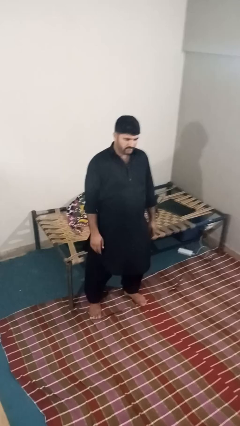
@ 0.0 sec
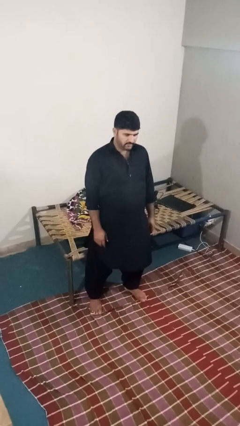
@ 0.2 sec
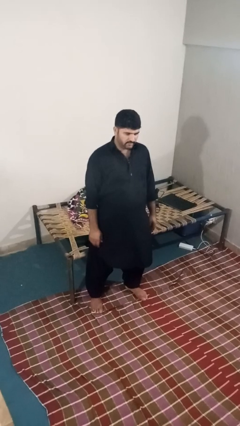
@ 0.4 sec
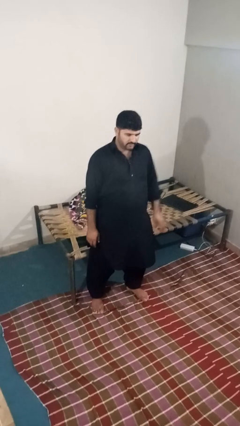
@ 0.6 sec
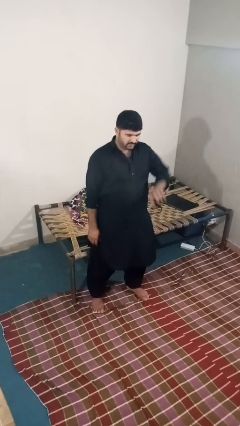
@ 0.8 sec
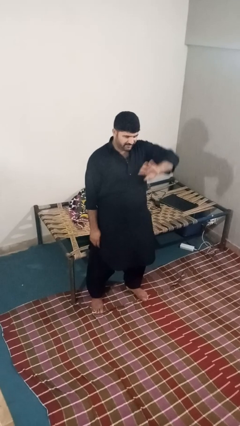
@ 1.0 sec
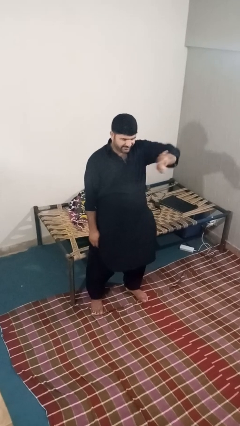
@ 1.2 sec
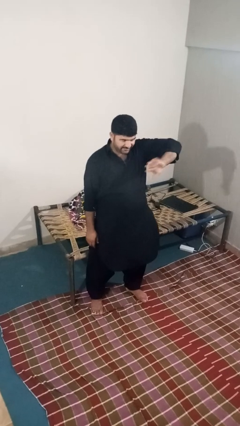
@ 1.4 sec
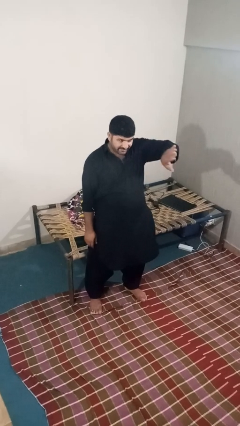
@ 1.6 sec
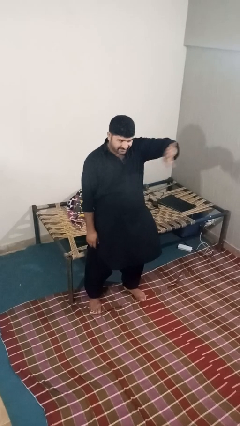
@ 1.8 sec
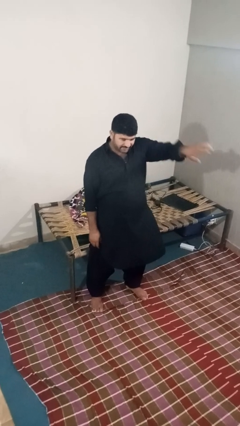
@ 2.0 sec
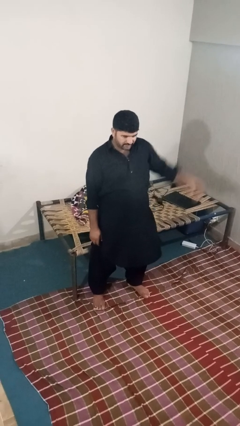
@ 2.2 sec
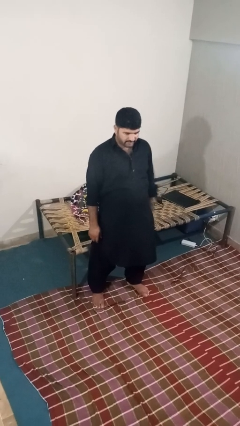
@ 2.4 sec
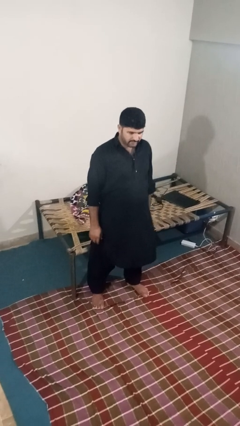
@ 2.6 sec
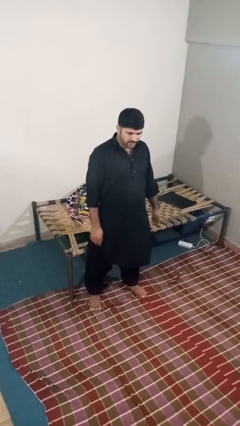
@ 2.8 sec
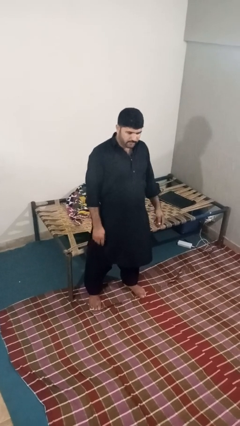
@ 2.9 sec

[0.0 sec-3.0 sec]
person gestures swipe left

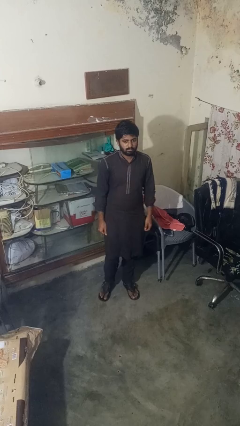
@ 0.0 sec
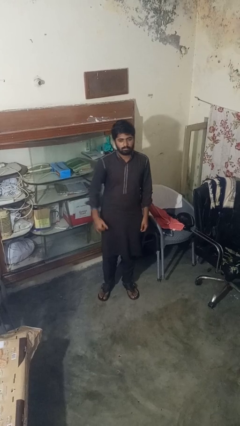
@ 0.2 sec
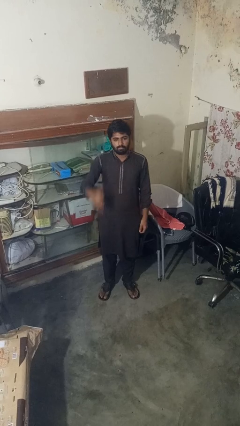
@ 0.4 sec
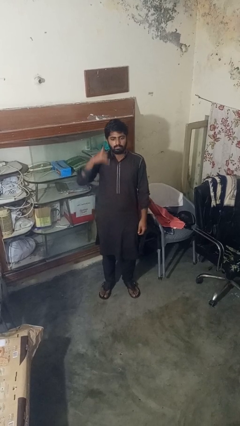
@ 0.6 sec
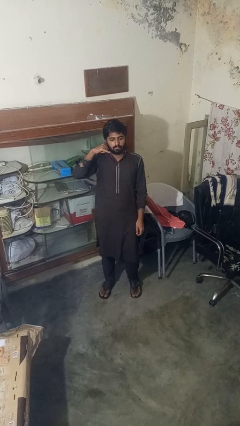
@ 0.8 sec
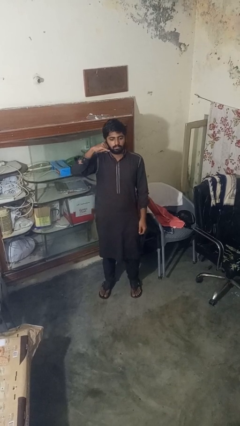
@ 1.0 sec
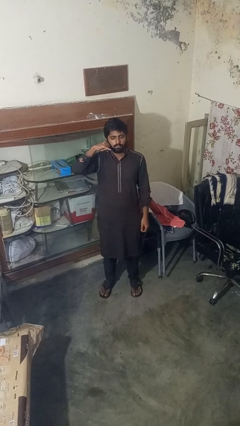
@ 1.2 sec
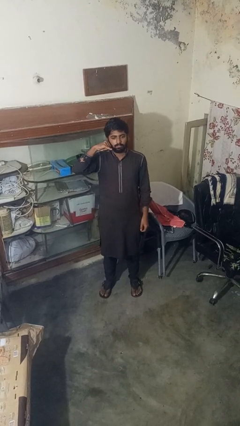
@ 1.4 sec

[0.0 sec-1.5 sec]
person gestures call me

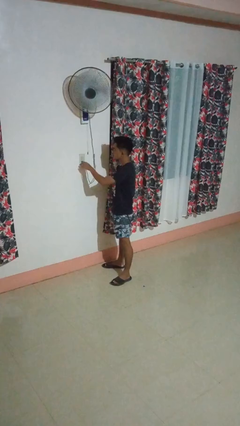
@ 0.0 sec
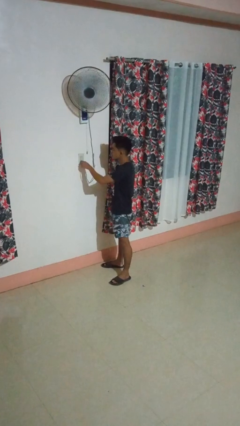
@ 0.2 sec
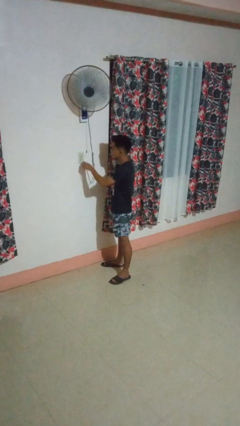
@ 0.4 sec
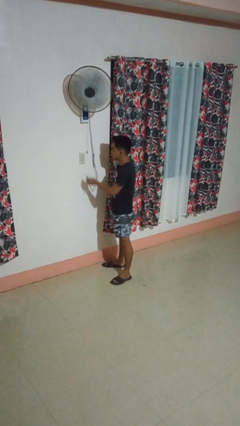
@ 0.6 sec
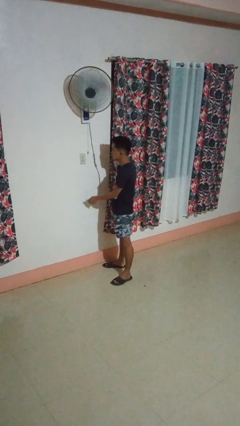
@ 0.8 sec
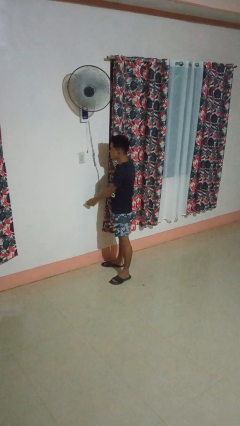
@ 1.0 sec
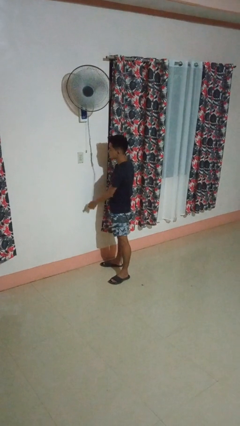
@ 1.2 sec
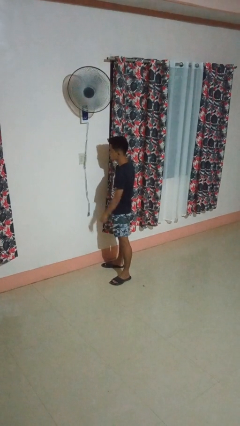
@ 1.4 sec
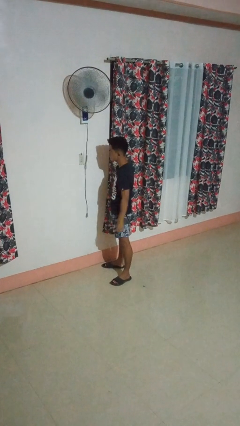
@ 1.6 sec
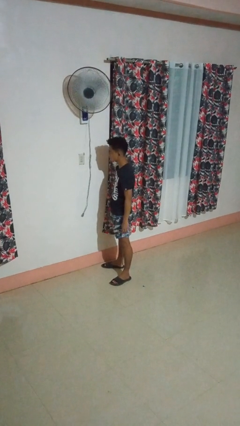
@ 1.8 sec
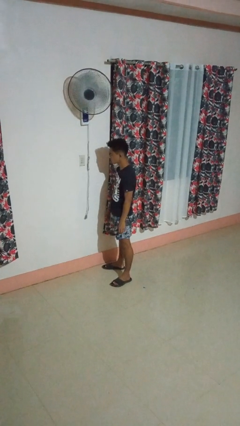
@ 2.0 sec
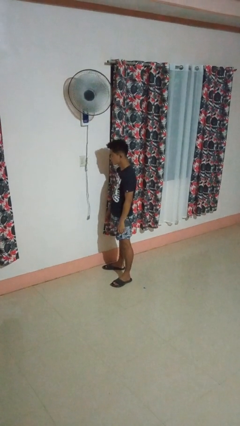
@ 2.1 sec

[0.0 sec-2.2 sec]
person unplugs from electrical socket

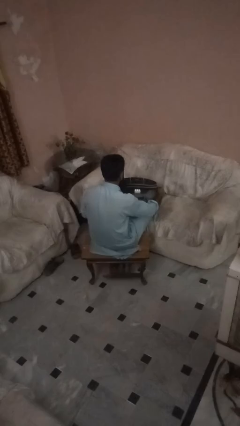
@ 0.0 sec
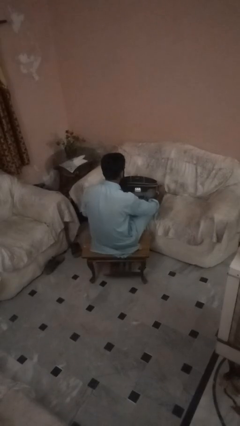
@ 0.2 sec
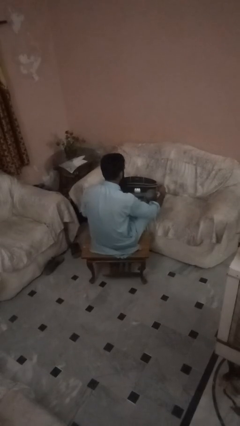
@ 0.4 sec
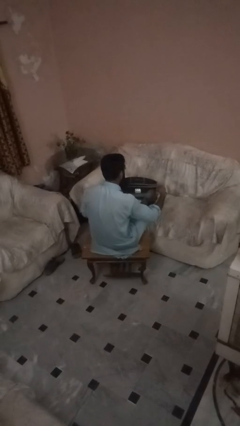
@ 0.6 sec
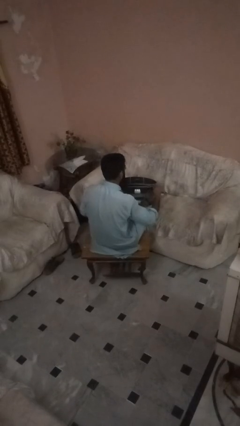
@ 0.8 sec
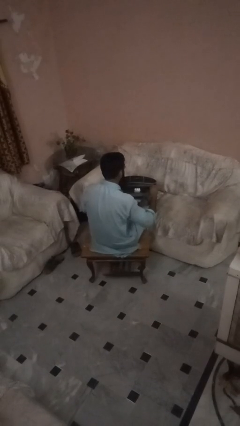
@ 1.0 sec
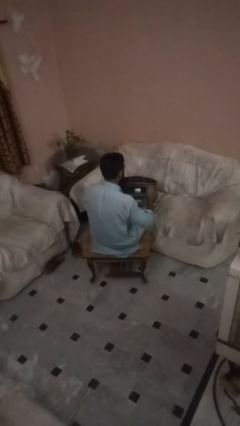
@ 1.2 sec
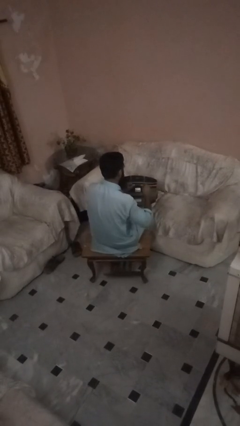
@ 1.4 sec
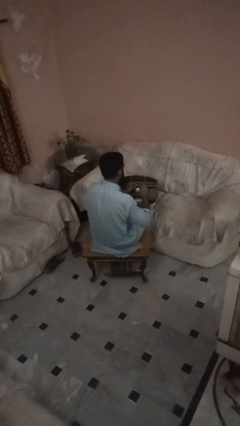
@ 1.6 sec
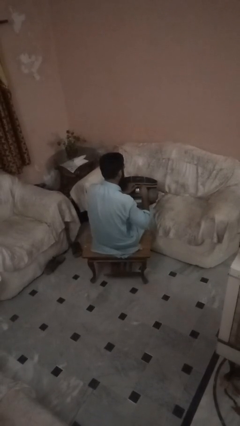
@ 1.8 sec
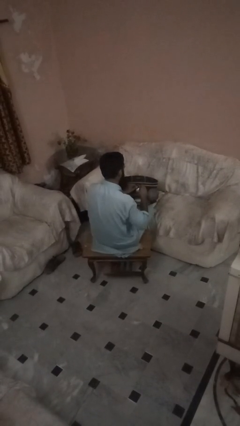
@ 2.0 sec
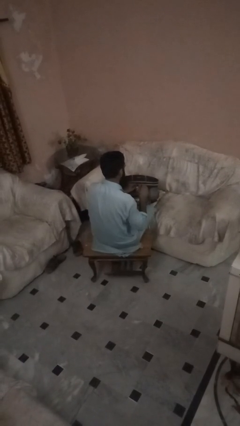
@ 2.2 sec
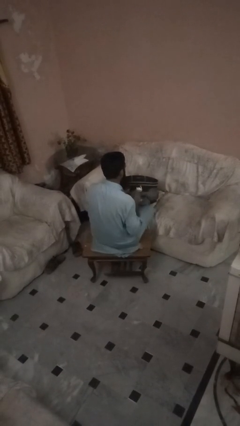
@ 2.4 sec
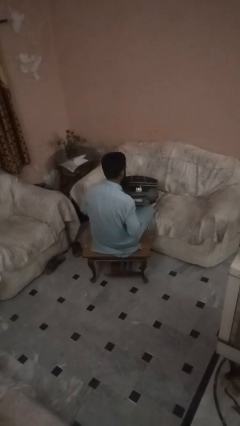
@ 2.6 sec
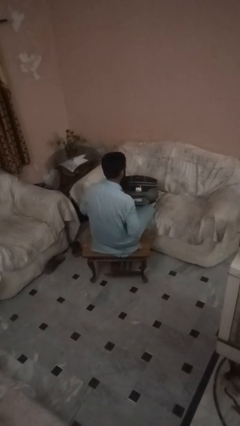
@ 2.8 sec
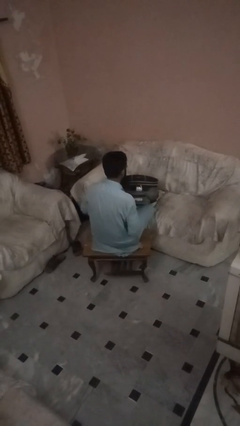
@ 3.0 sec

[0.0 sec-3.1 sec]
person closes suitcase

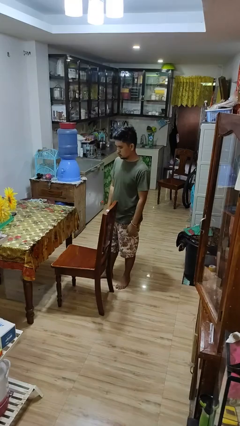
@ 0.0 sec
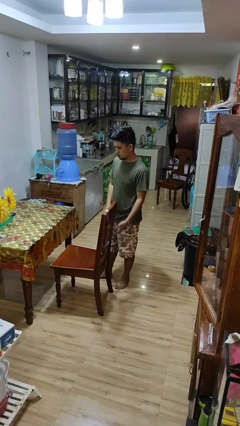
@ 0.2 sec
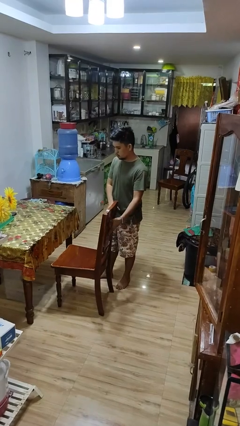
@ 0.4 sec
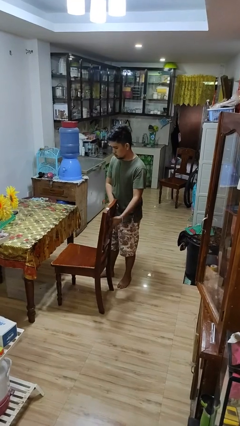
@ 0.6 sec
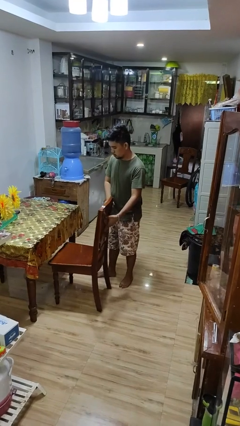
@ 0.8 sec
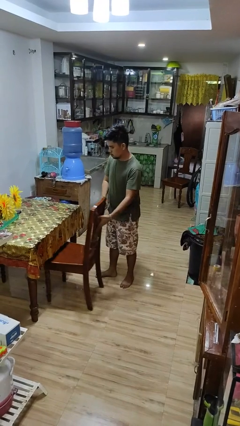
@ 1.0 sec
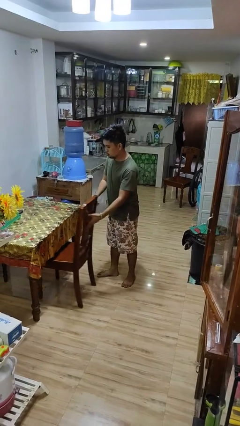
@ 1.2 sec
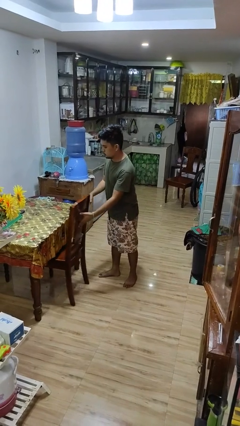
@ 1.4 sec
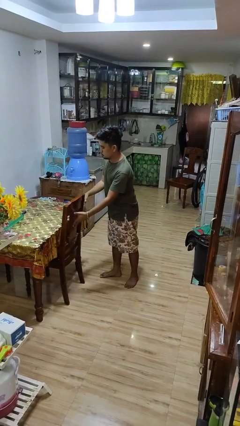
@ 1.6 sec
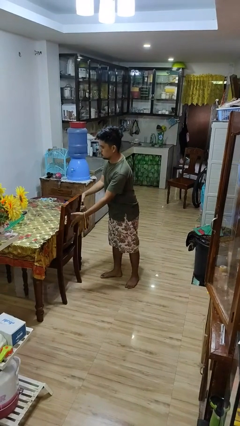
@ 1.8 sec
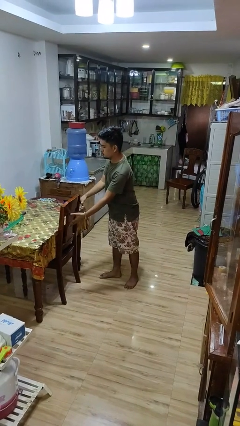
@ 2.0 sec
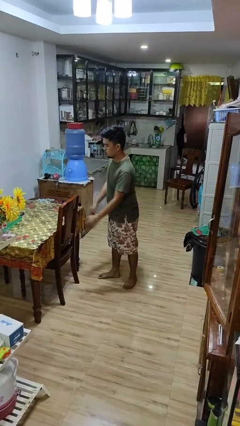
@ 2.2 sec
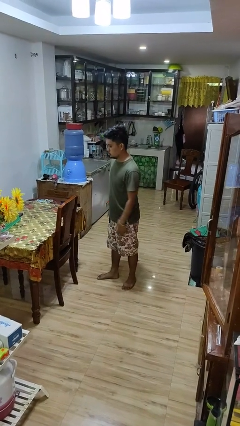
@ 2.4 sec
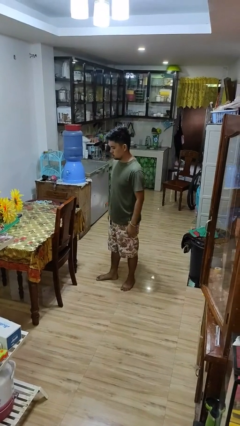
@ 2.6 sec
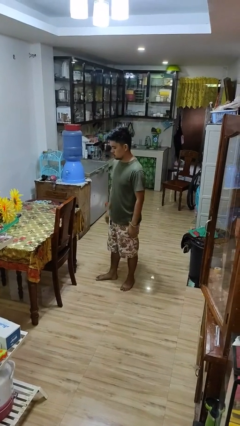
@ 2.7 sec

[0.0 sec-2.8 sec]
person pushes in chair

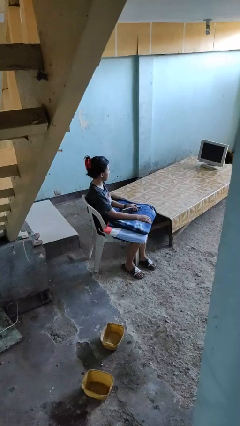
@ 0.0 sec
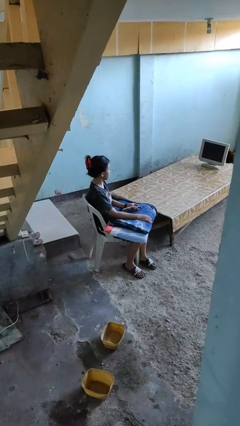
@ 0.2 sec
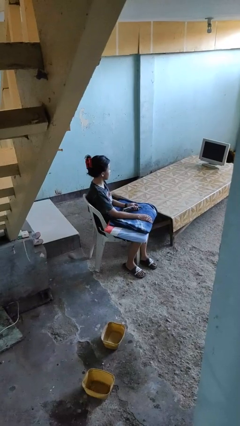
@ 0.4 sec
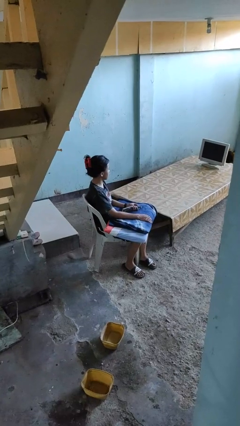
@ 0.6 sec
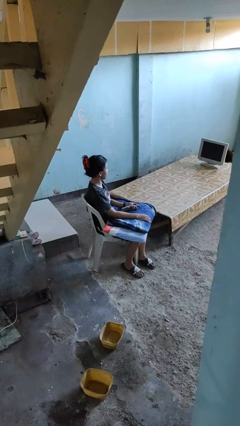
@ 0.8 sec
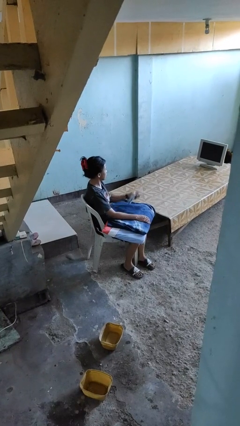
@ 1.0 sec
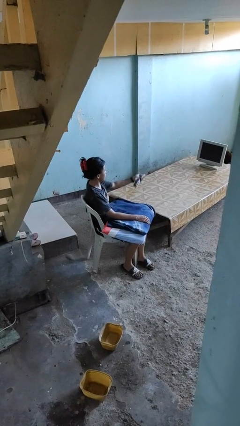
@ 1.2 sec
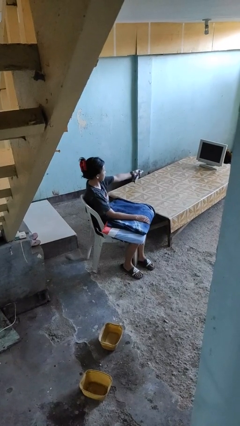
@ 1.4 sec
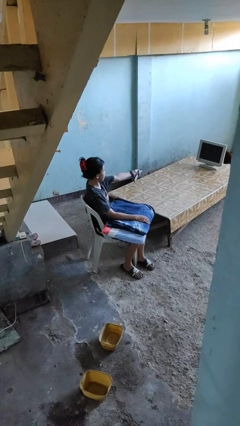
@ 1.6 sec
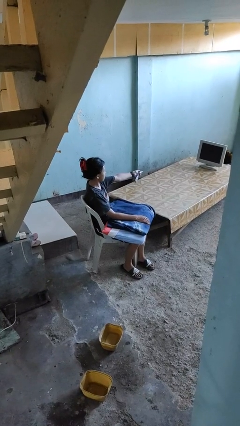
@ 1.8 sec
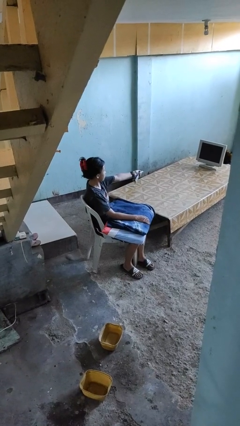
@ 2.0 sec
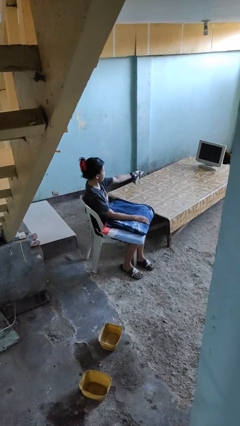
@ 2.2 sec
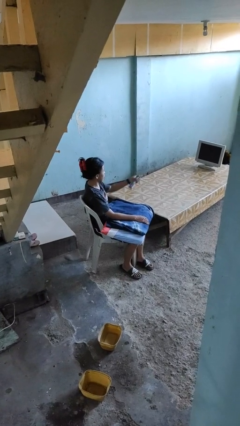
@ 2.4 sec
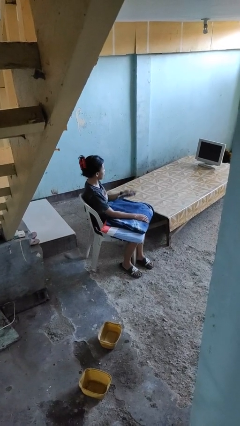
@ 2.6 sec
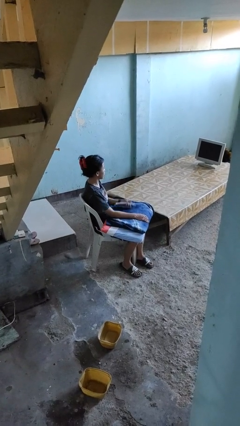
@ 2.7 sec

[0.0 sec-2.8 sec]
person uses television remote

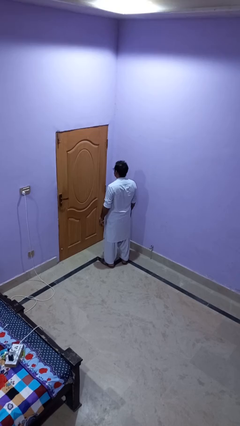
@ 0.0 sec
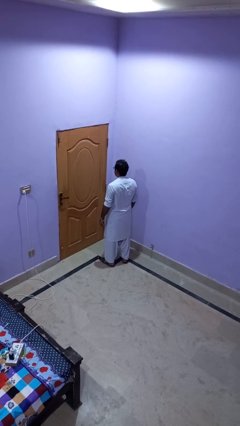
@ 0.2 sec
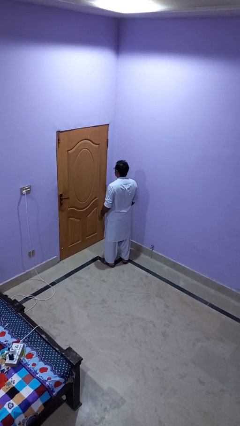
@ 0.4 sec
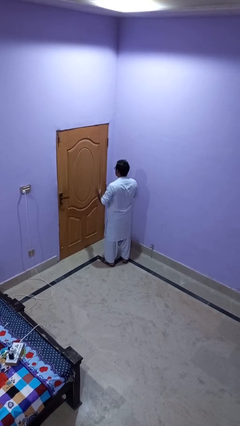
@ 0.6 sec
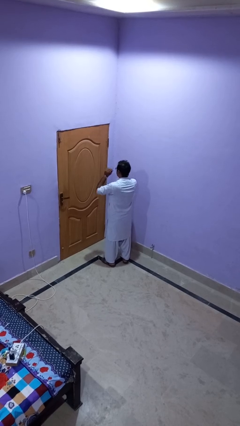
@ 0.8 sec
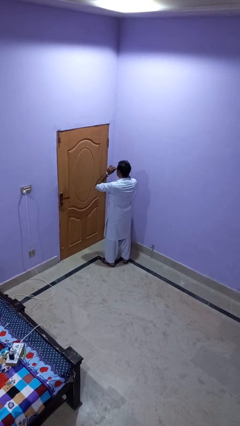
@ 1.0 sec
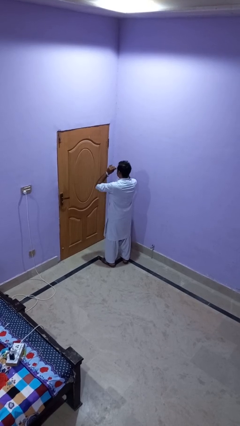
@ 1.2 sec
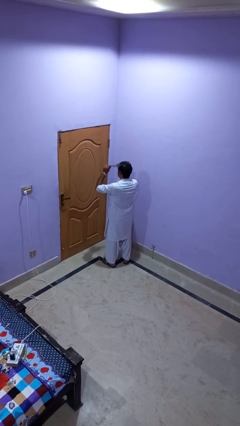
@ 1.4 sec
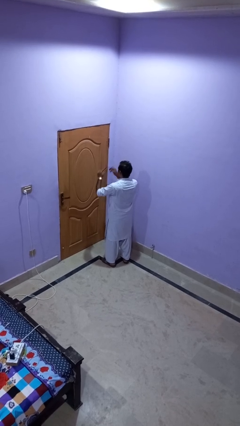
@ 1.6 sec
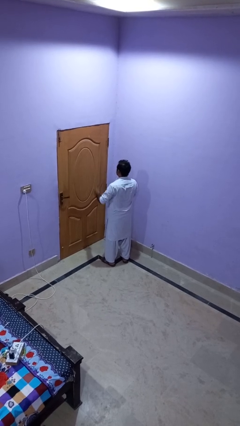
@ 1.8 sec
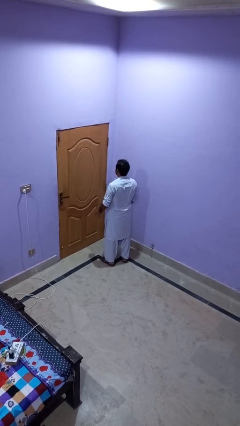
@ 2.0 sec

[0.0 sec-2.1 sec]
person takes off glasses
